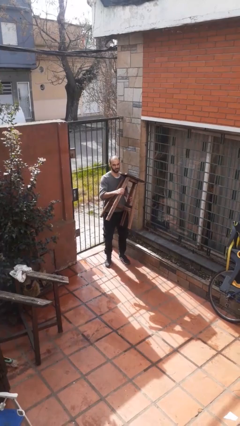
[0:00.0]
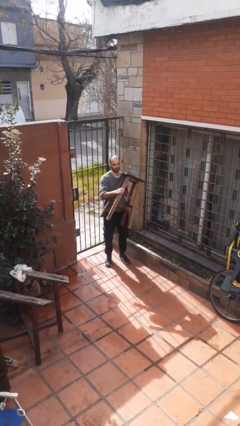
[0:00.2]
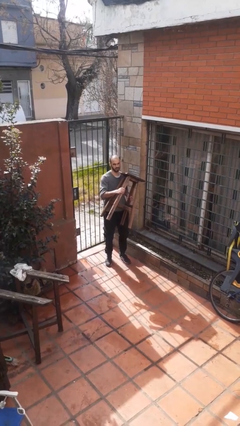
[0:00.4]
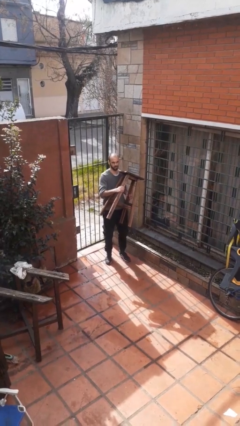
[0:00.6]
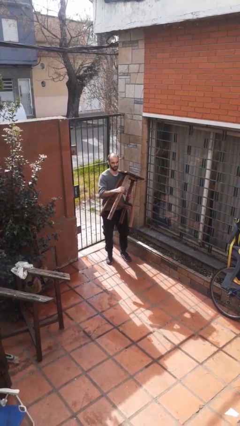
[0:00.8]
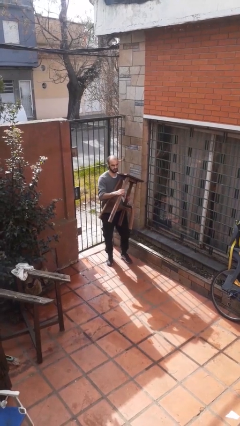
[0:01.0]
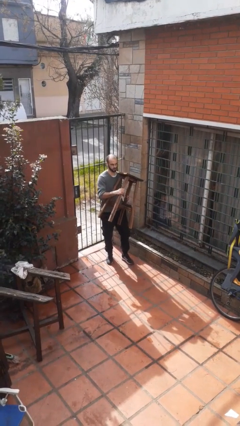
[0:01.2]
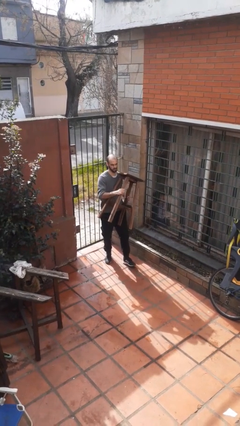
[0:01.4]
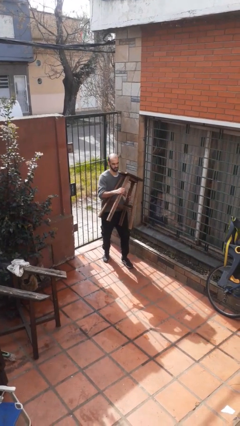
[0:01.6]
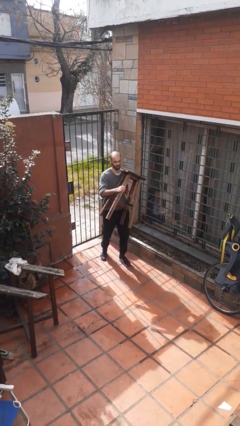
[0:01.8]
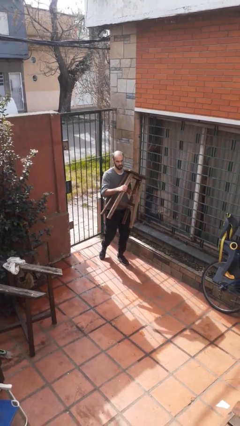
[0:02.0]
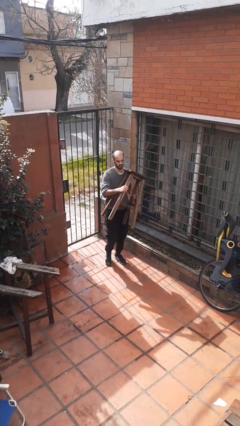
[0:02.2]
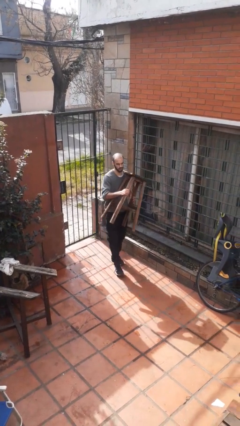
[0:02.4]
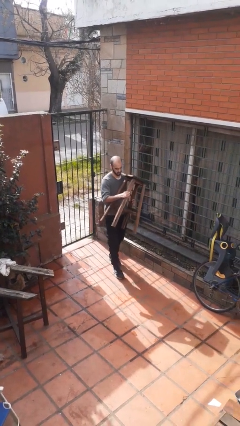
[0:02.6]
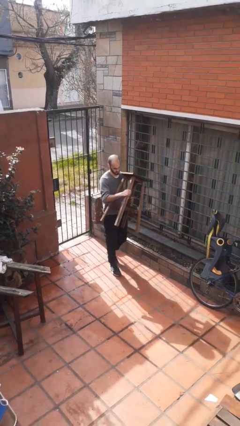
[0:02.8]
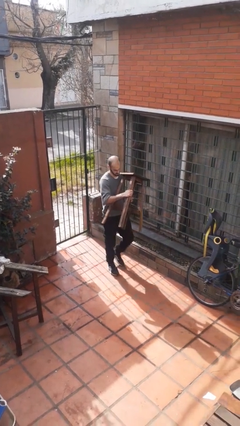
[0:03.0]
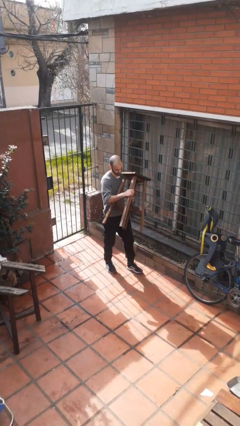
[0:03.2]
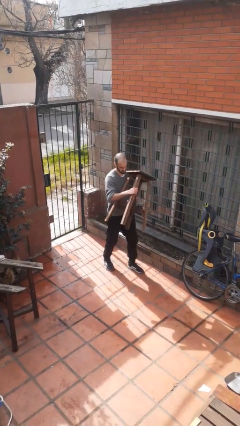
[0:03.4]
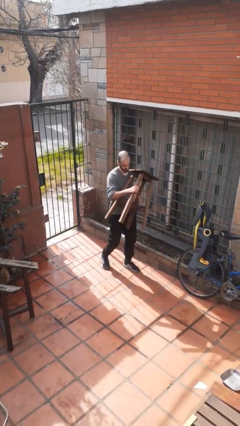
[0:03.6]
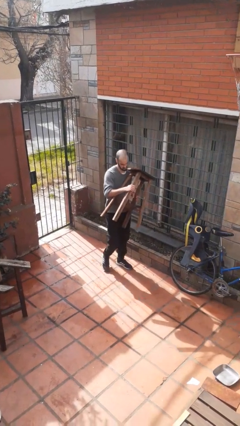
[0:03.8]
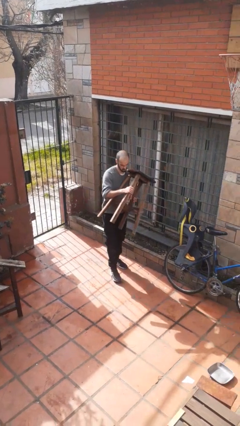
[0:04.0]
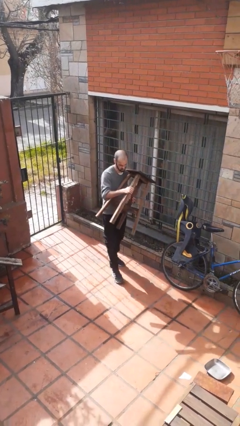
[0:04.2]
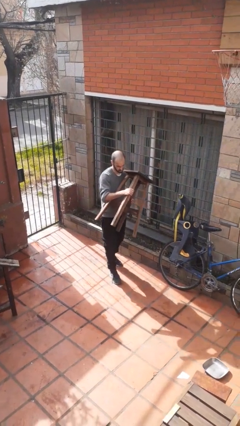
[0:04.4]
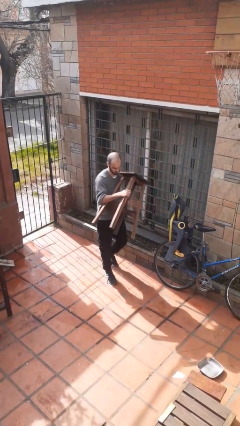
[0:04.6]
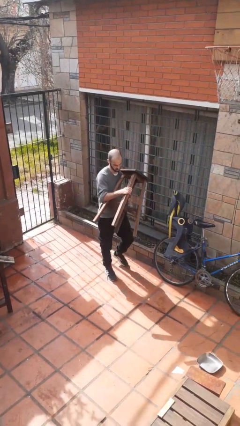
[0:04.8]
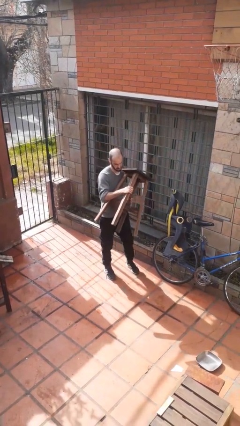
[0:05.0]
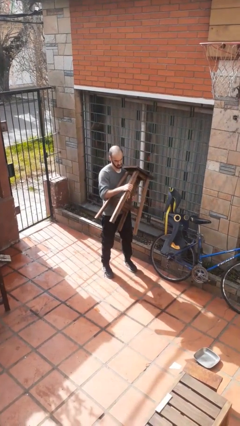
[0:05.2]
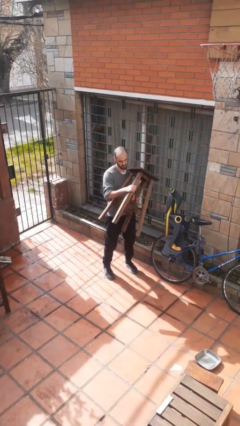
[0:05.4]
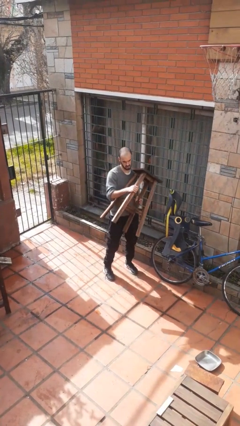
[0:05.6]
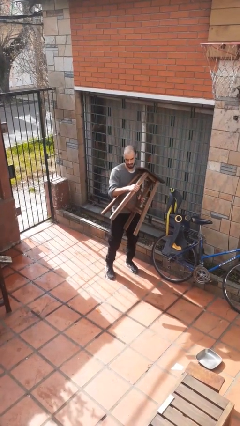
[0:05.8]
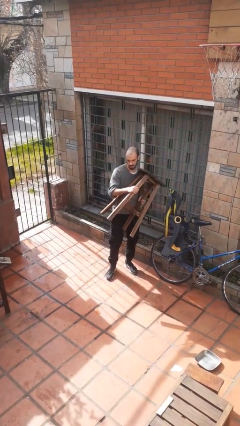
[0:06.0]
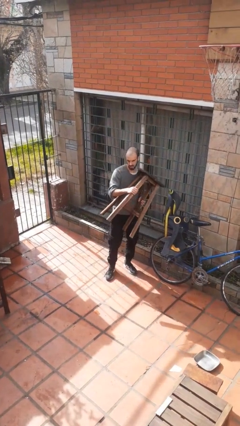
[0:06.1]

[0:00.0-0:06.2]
person carries furniture

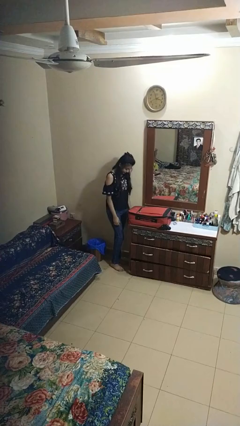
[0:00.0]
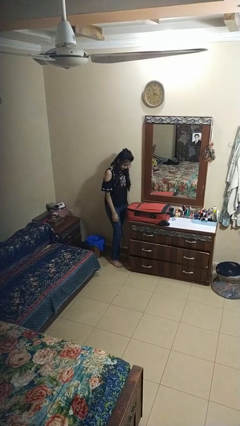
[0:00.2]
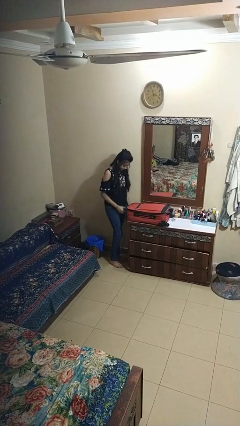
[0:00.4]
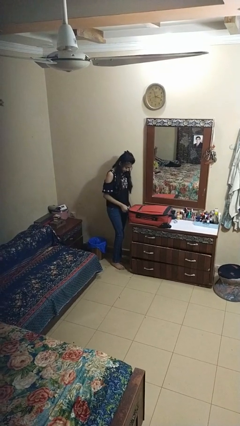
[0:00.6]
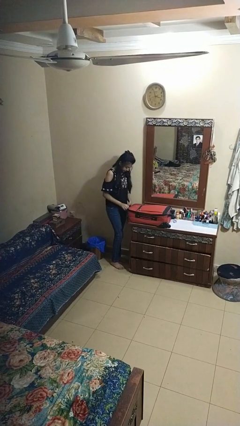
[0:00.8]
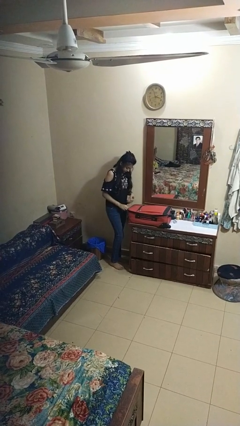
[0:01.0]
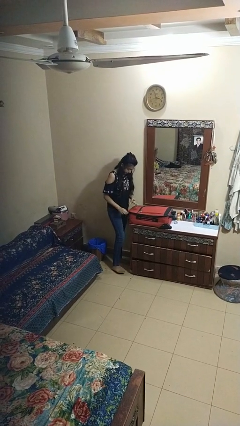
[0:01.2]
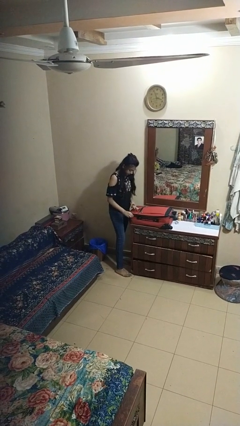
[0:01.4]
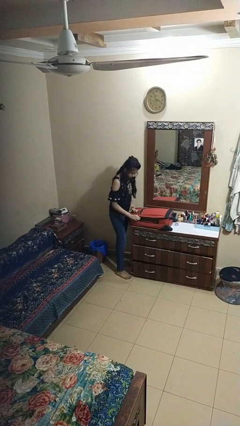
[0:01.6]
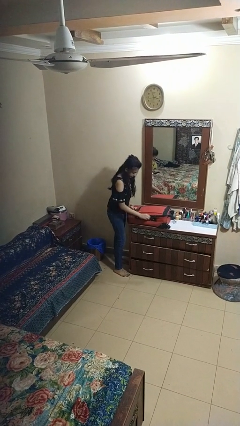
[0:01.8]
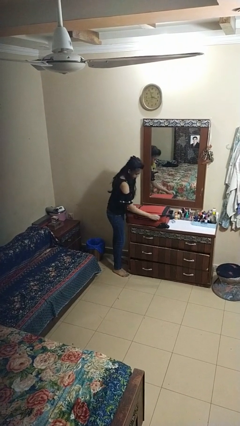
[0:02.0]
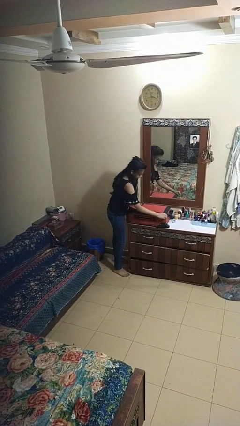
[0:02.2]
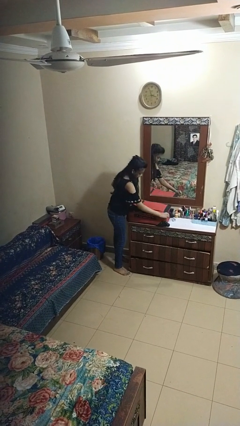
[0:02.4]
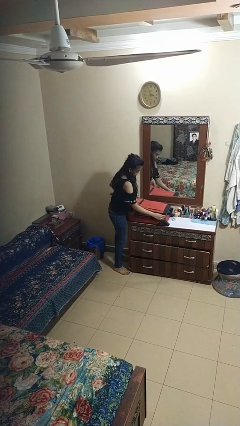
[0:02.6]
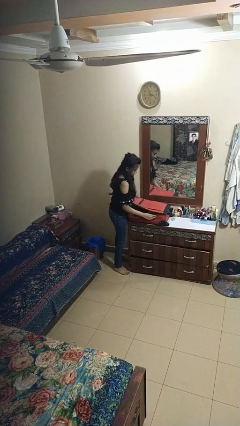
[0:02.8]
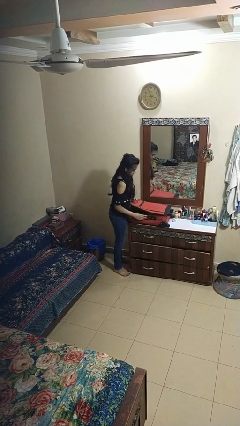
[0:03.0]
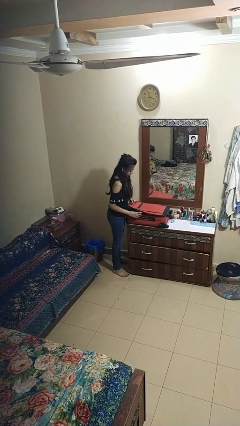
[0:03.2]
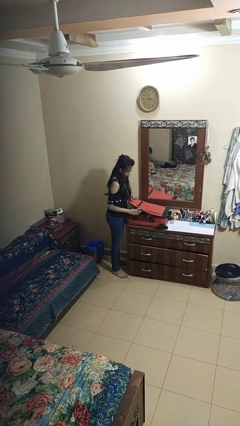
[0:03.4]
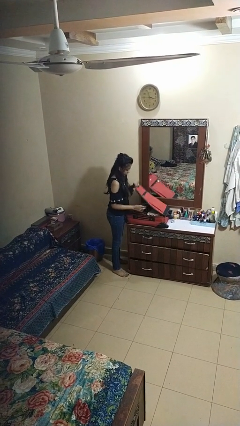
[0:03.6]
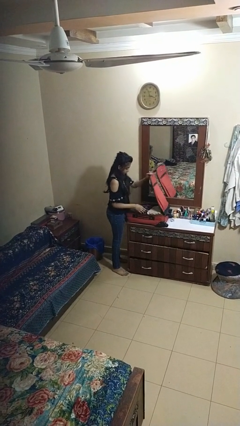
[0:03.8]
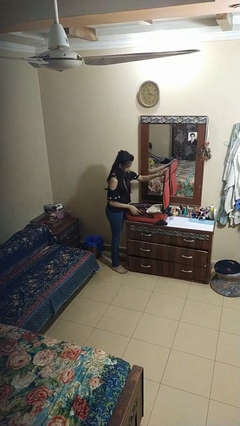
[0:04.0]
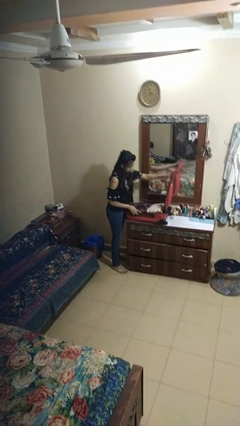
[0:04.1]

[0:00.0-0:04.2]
person opens suitcase

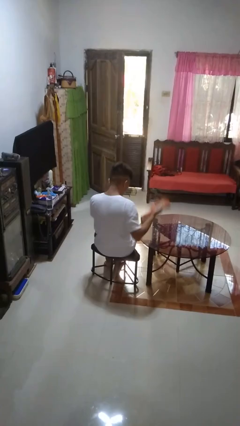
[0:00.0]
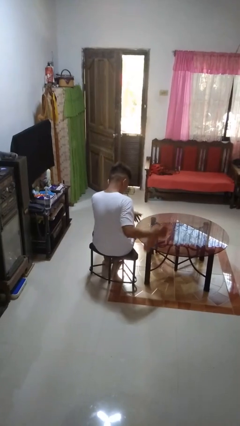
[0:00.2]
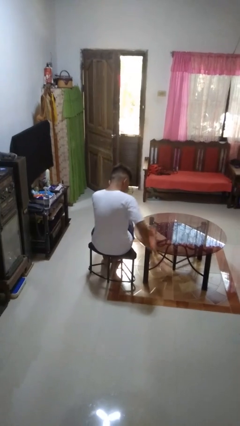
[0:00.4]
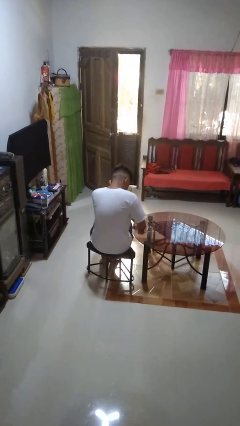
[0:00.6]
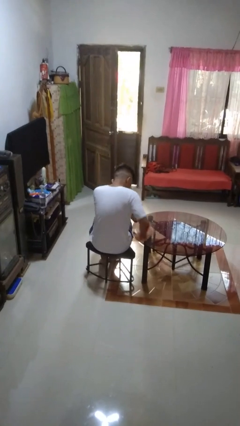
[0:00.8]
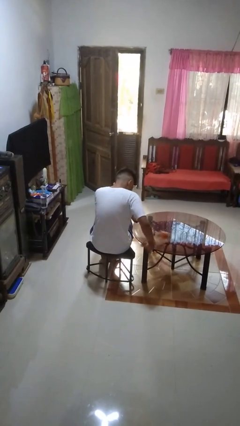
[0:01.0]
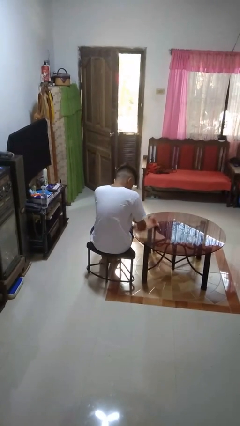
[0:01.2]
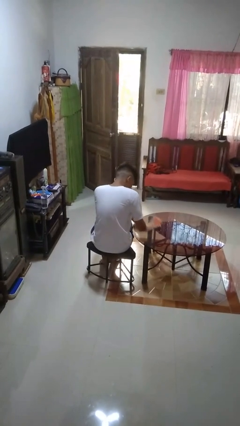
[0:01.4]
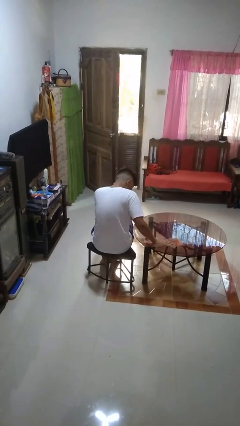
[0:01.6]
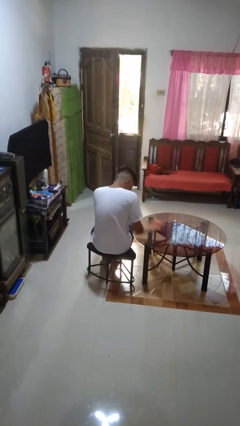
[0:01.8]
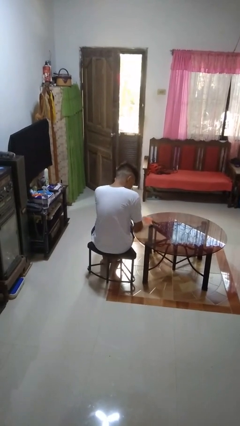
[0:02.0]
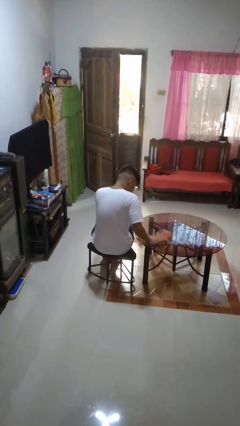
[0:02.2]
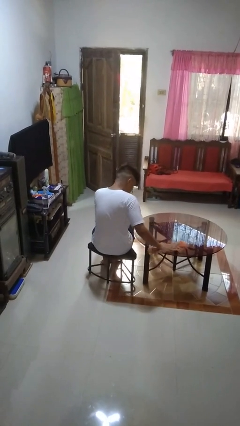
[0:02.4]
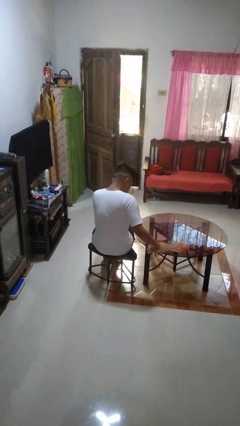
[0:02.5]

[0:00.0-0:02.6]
person cleans table with rag

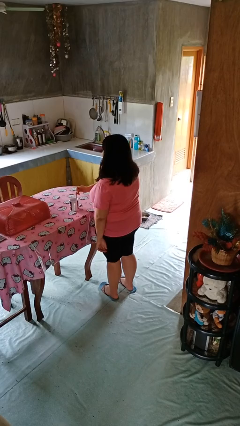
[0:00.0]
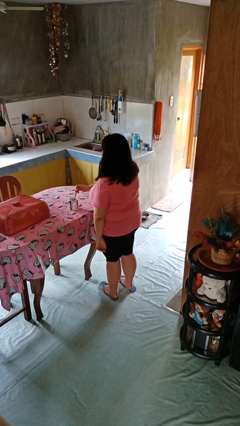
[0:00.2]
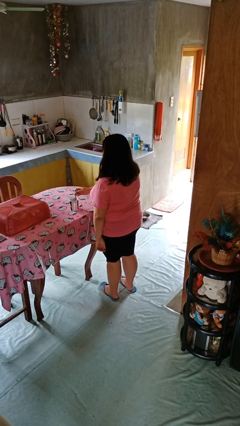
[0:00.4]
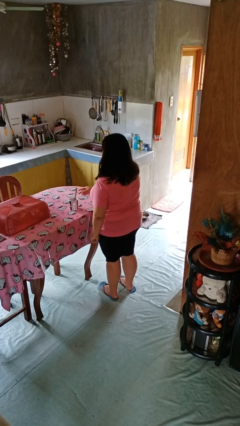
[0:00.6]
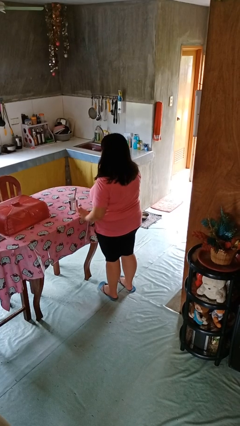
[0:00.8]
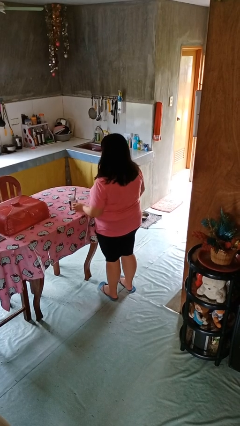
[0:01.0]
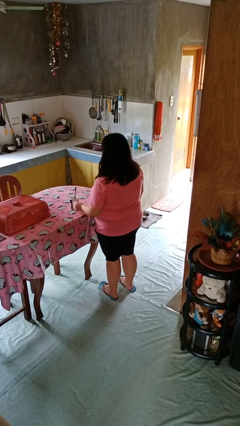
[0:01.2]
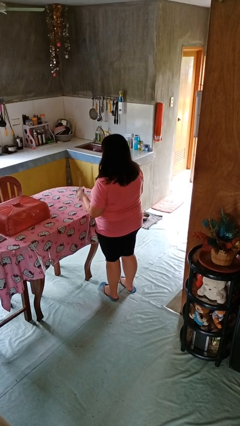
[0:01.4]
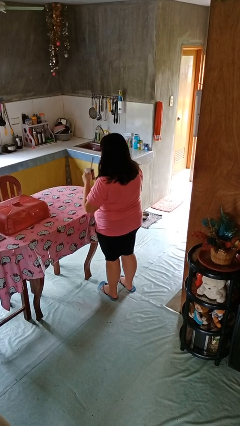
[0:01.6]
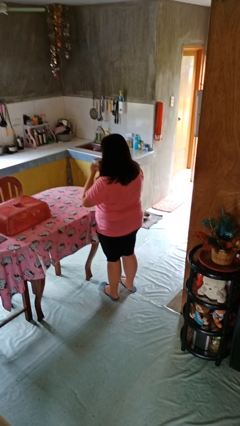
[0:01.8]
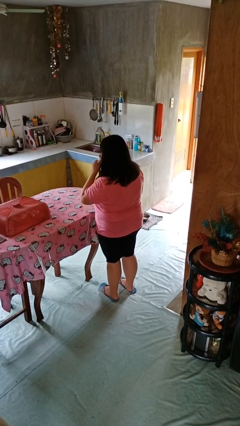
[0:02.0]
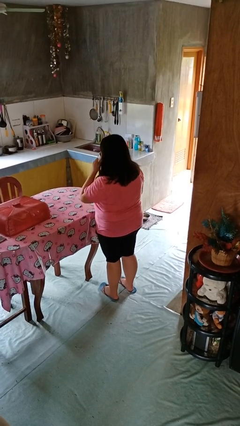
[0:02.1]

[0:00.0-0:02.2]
person stirs mug

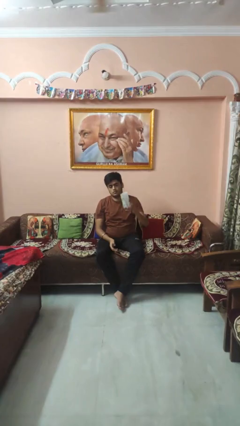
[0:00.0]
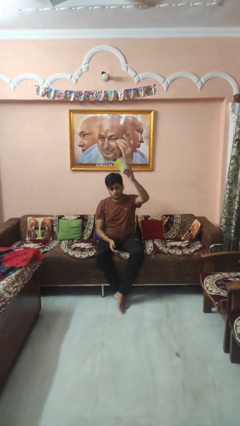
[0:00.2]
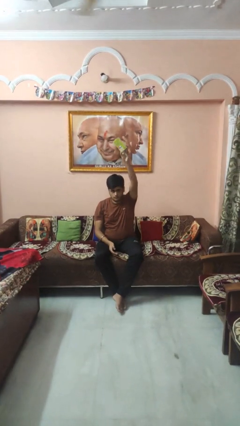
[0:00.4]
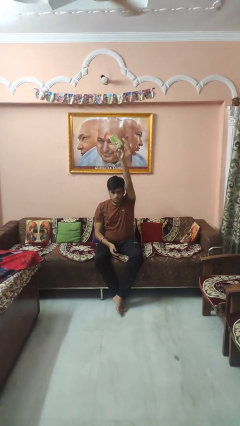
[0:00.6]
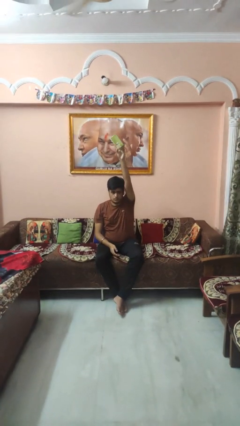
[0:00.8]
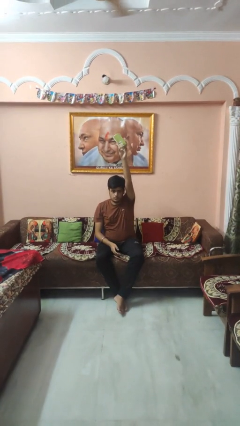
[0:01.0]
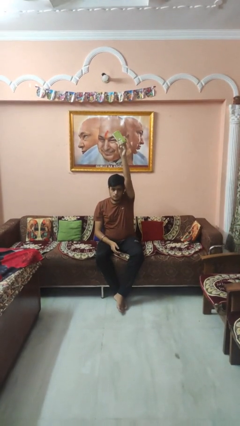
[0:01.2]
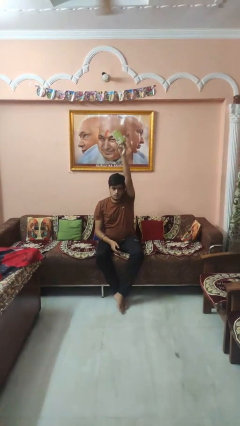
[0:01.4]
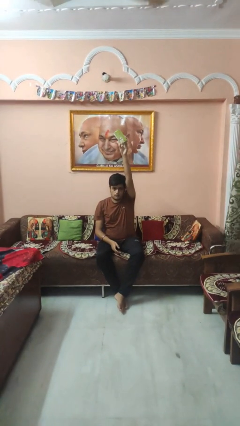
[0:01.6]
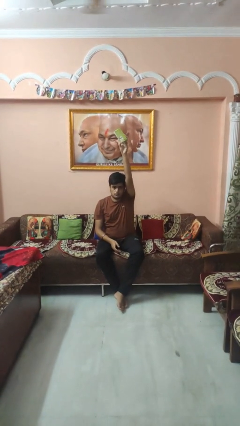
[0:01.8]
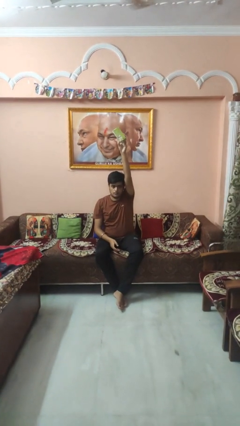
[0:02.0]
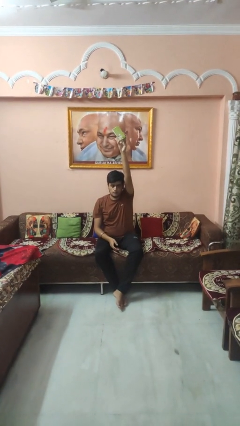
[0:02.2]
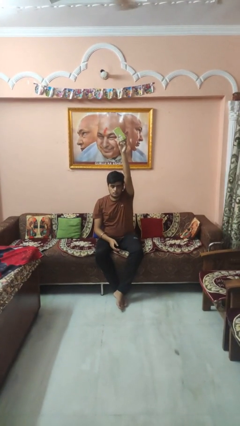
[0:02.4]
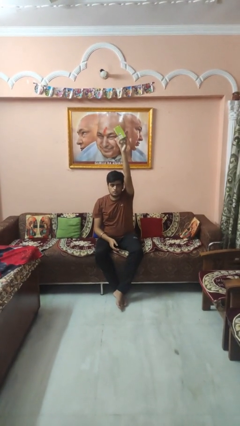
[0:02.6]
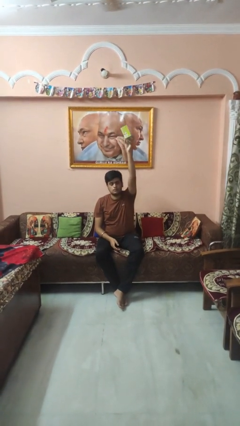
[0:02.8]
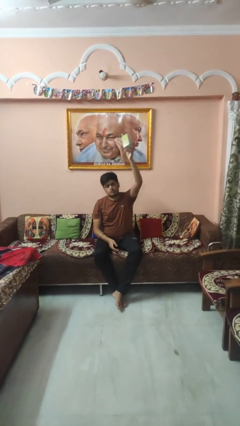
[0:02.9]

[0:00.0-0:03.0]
person holds object above head
